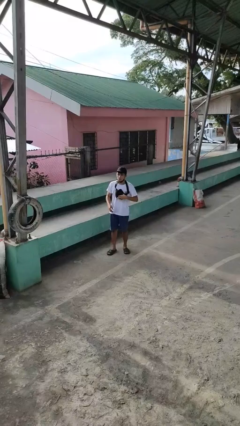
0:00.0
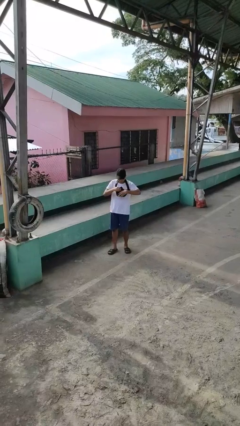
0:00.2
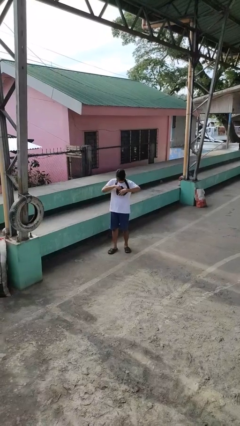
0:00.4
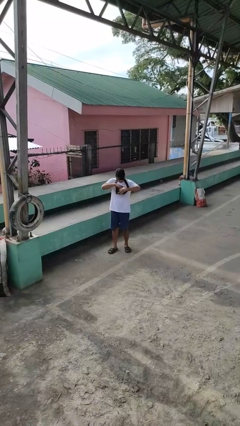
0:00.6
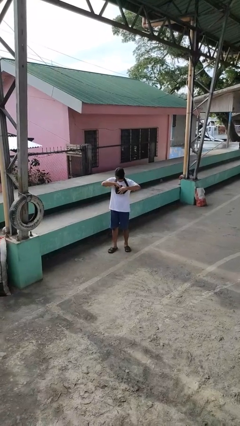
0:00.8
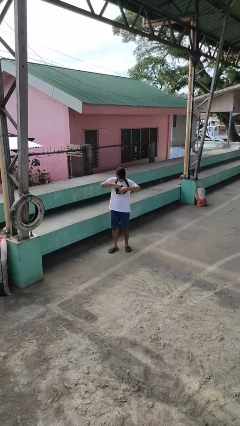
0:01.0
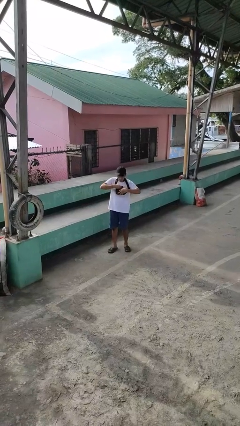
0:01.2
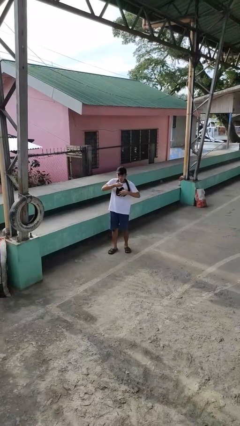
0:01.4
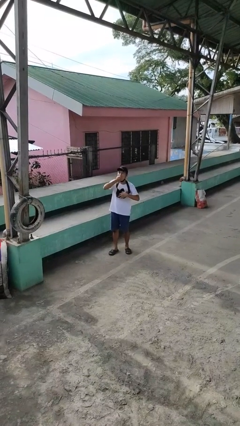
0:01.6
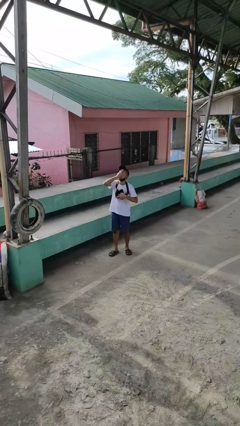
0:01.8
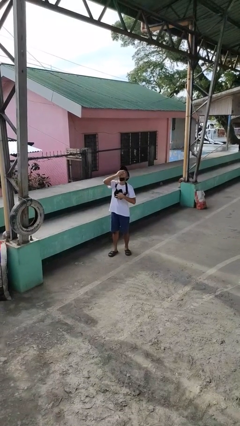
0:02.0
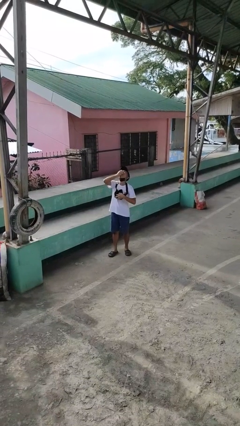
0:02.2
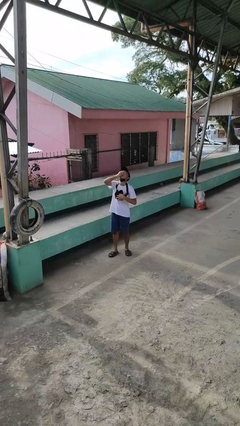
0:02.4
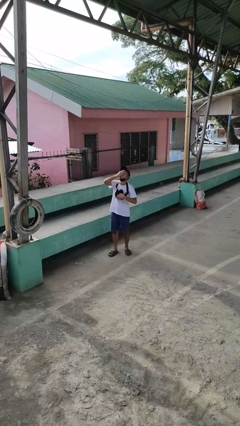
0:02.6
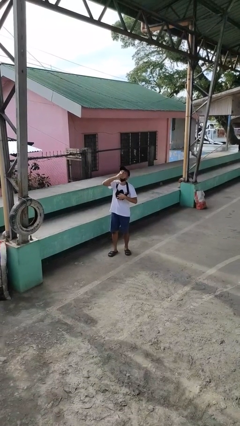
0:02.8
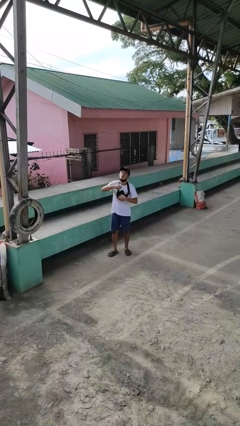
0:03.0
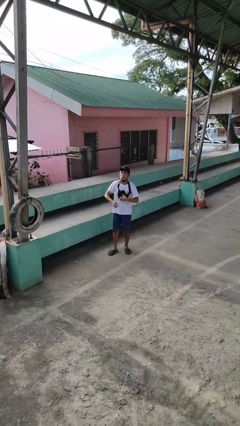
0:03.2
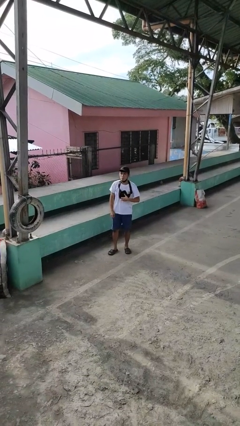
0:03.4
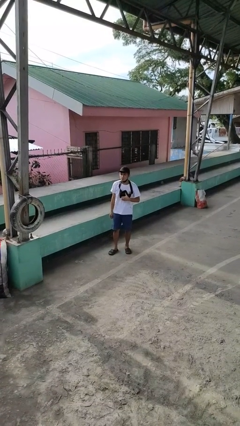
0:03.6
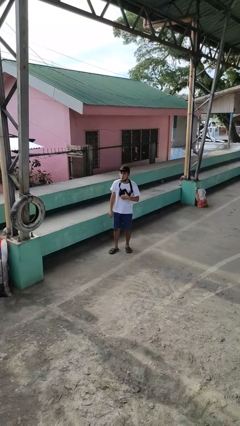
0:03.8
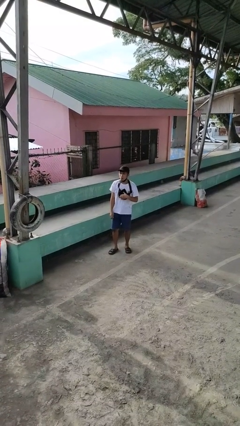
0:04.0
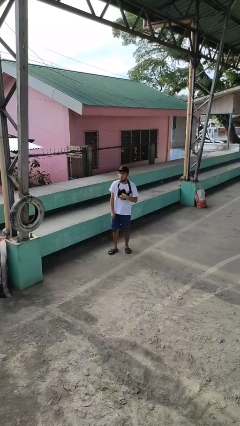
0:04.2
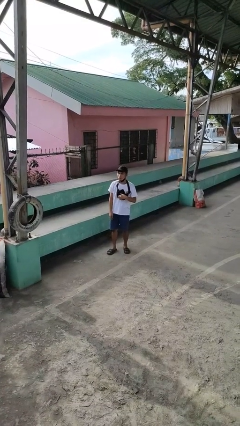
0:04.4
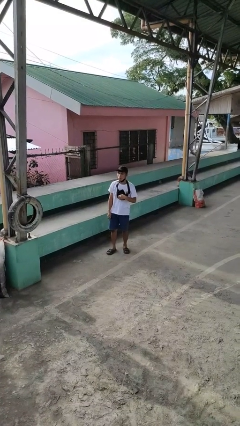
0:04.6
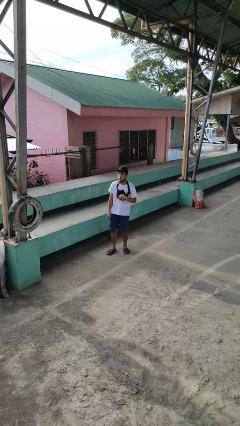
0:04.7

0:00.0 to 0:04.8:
person eats snack from bag

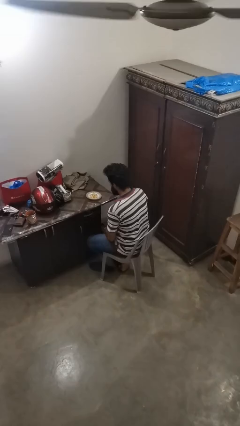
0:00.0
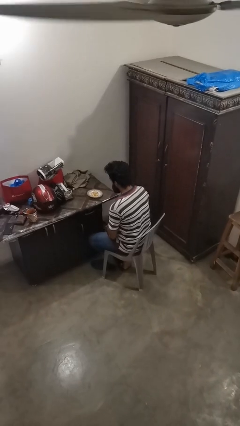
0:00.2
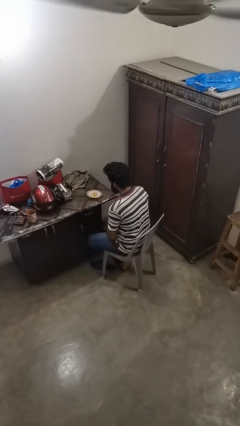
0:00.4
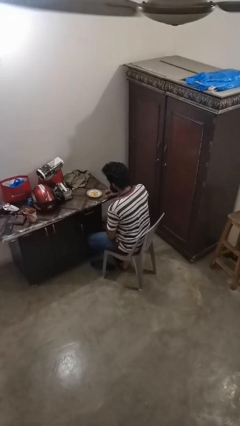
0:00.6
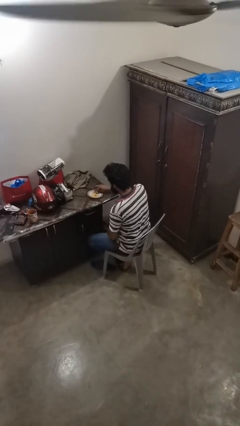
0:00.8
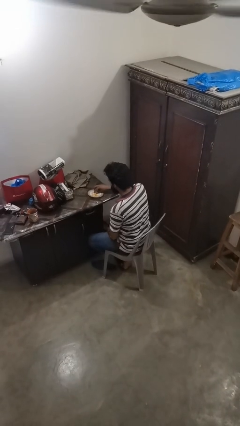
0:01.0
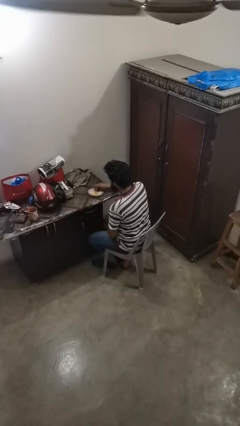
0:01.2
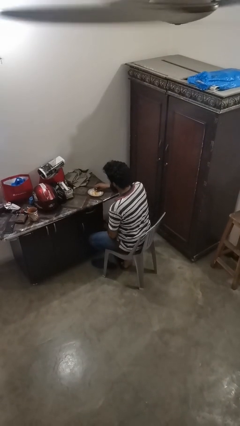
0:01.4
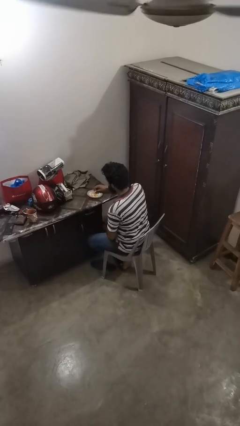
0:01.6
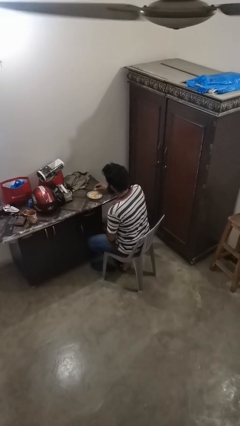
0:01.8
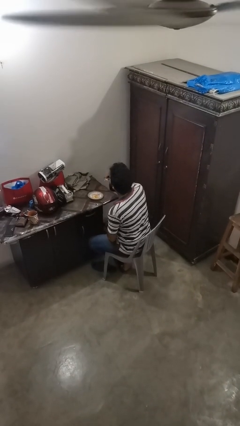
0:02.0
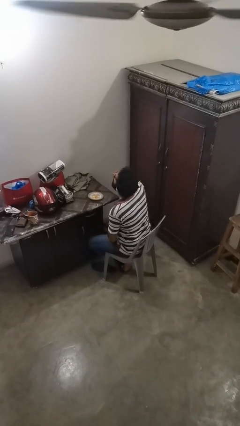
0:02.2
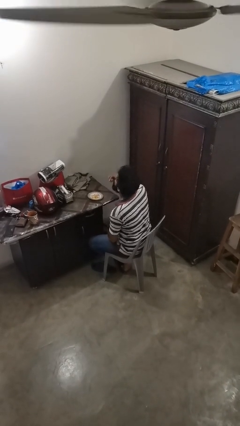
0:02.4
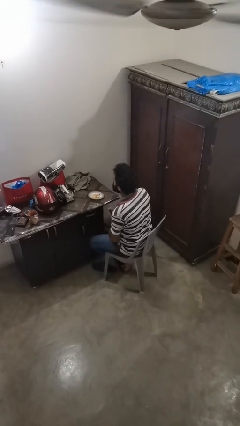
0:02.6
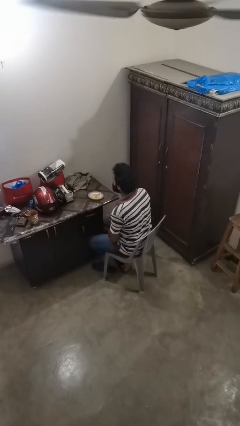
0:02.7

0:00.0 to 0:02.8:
person eats with hands

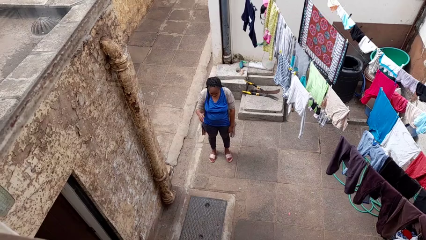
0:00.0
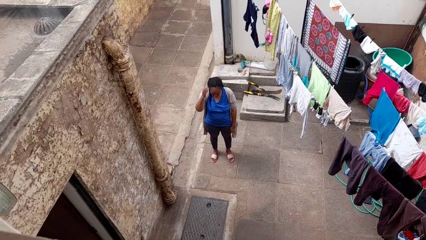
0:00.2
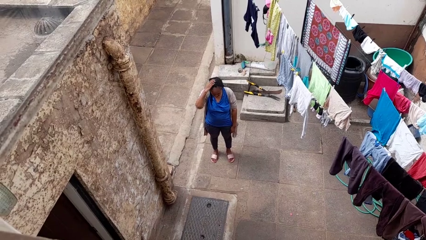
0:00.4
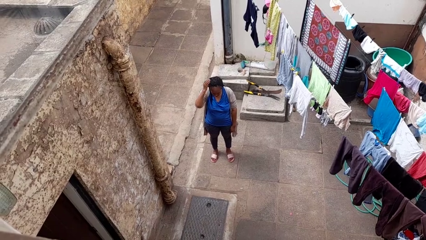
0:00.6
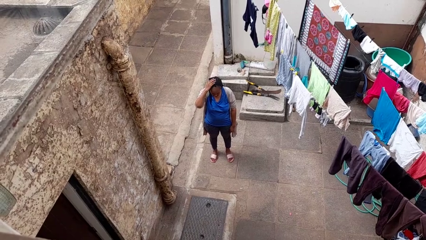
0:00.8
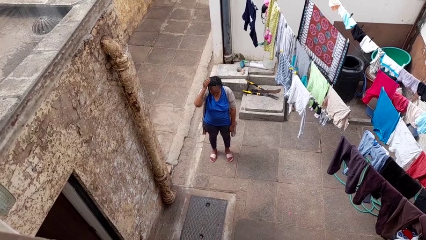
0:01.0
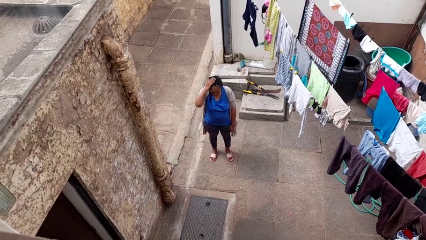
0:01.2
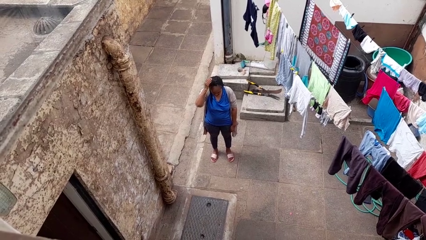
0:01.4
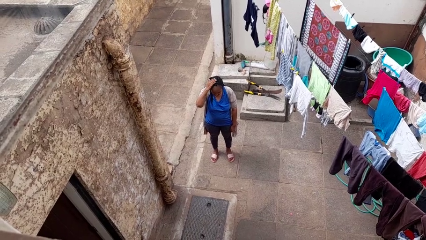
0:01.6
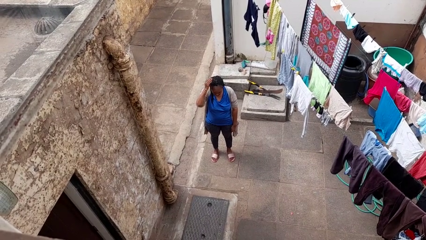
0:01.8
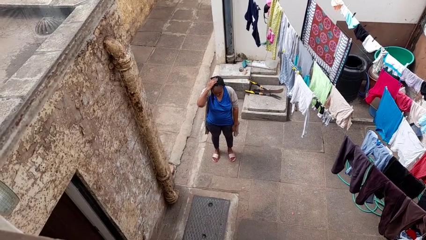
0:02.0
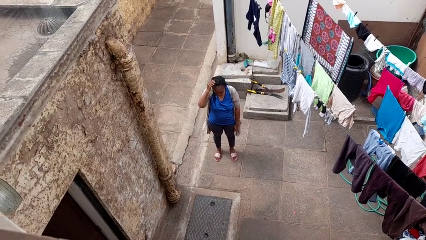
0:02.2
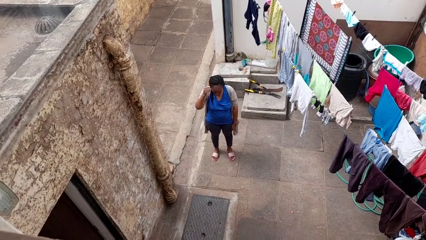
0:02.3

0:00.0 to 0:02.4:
person pats head

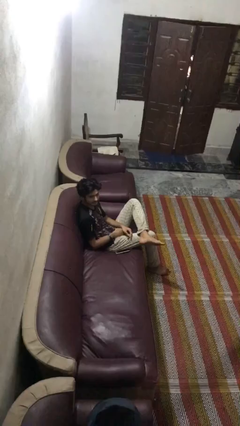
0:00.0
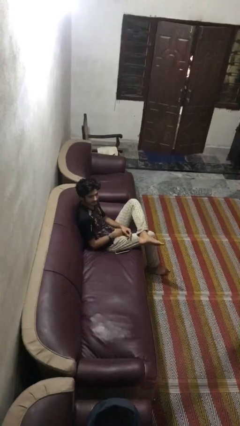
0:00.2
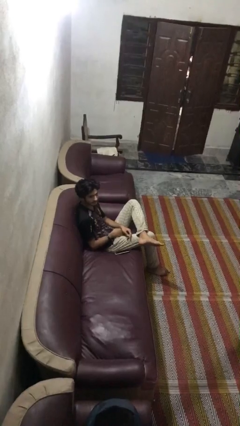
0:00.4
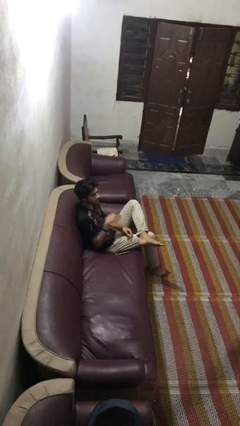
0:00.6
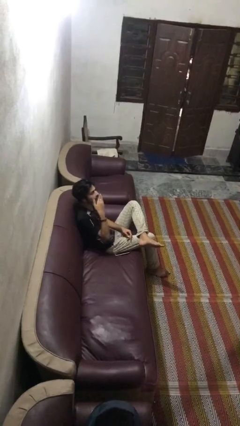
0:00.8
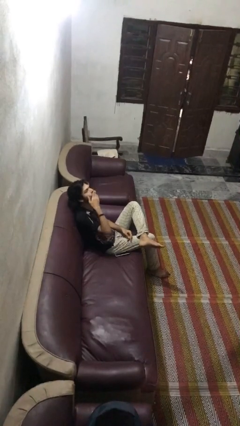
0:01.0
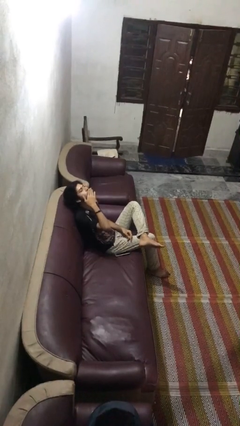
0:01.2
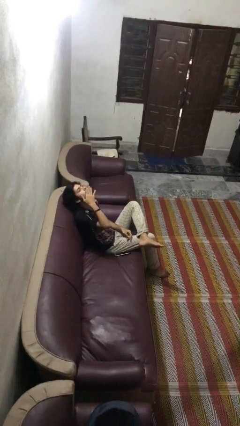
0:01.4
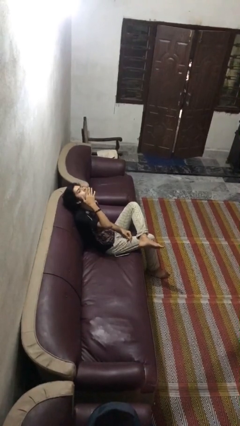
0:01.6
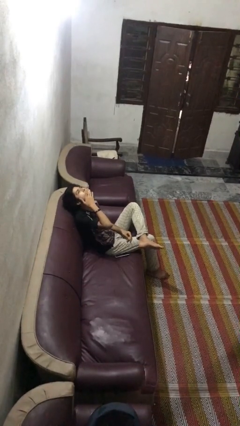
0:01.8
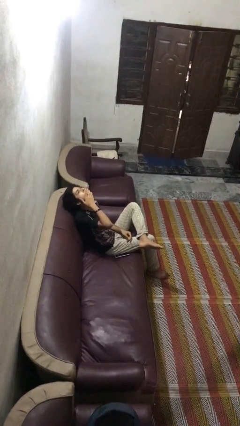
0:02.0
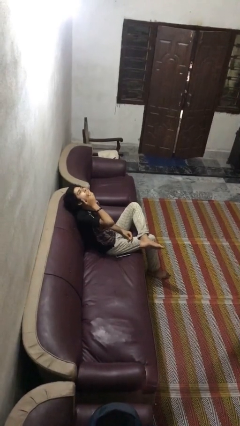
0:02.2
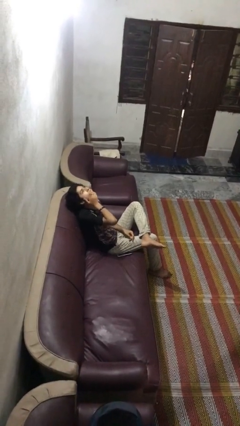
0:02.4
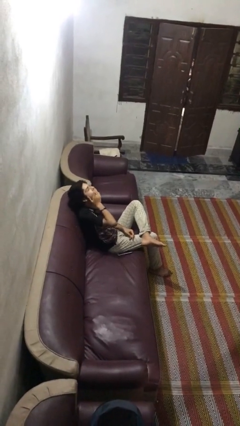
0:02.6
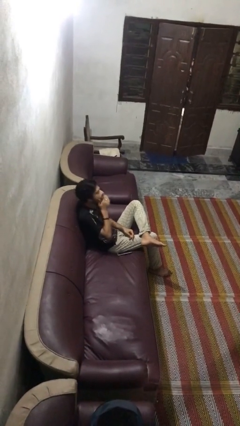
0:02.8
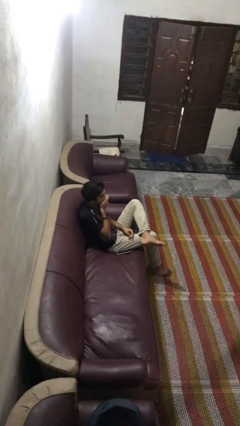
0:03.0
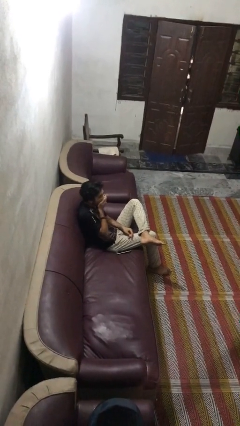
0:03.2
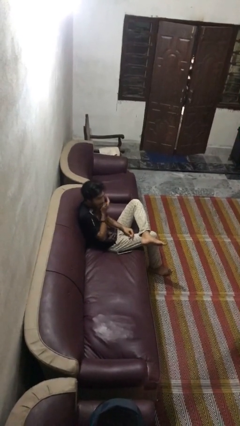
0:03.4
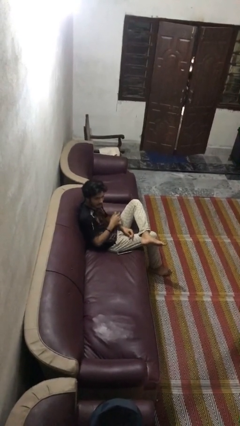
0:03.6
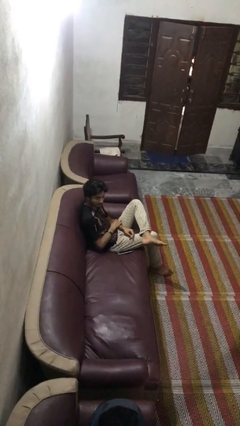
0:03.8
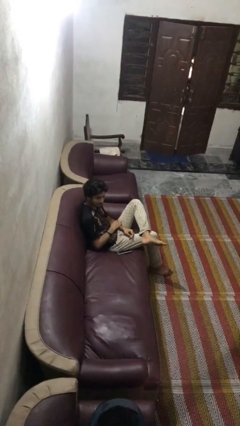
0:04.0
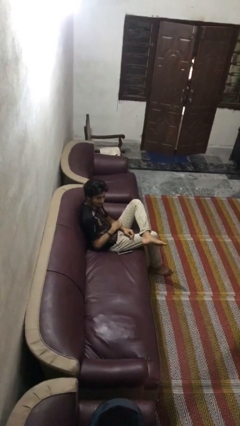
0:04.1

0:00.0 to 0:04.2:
person yawns

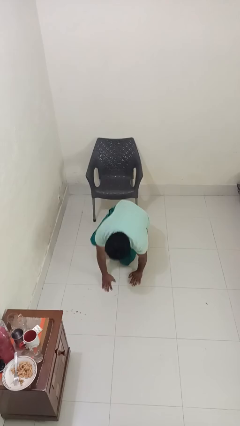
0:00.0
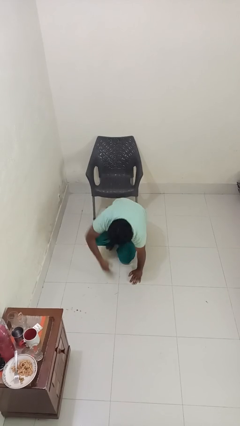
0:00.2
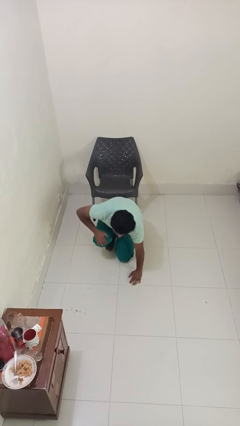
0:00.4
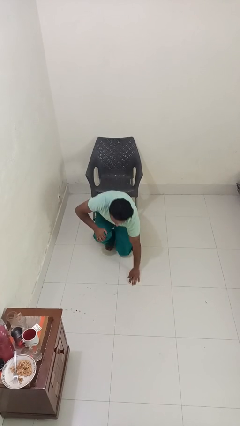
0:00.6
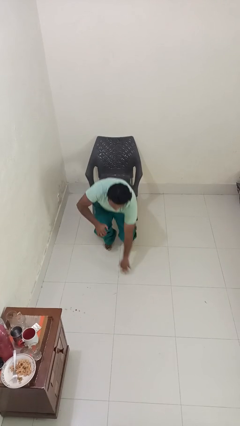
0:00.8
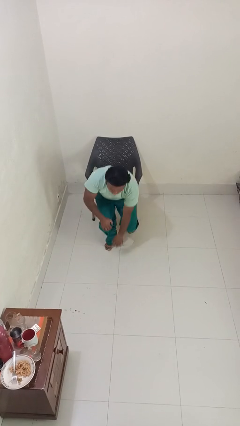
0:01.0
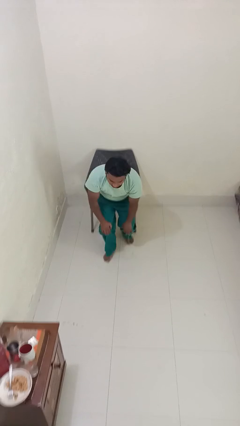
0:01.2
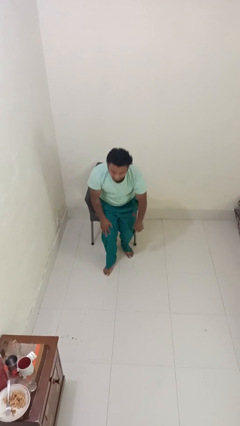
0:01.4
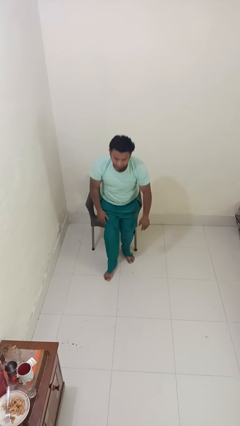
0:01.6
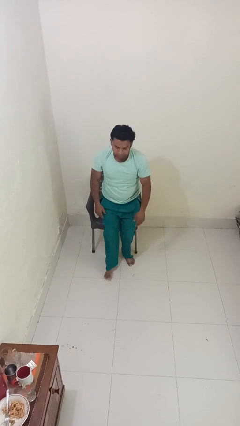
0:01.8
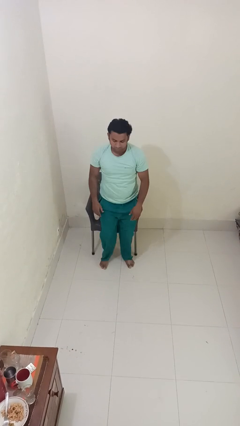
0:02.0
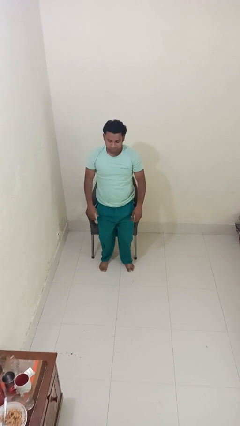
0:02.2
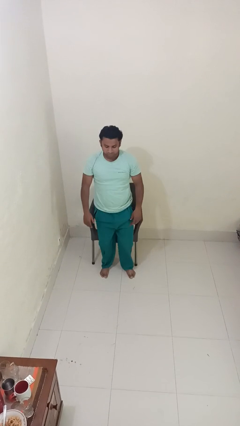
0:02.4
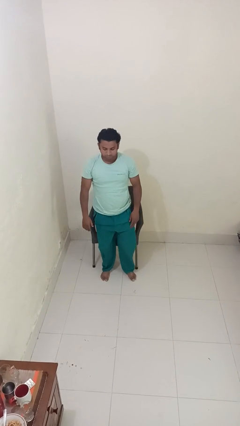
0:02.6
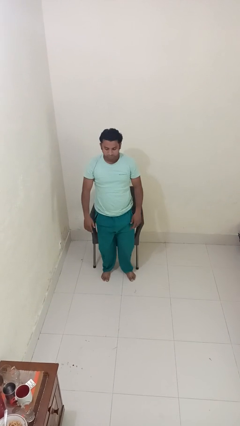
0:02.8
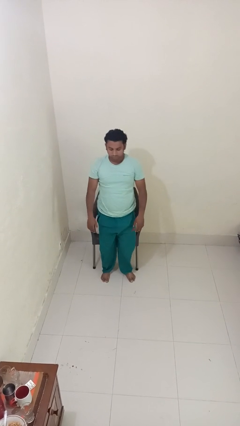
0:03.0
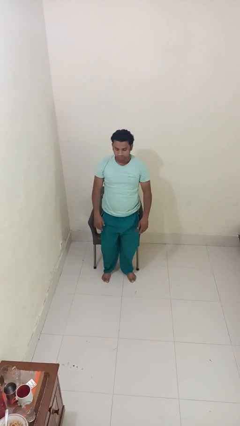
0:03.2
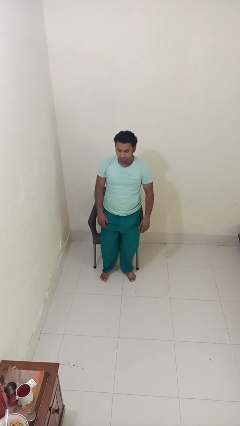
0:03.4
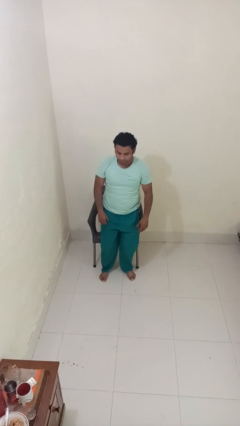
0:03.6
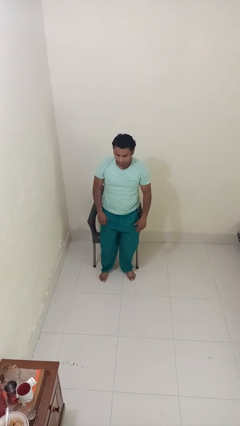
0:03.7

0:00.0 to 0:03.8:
person stands up from floor
